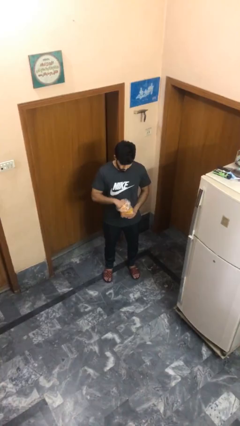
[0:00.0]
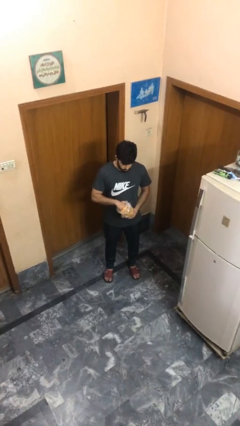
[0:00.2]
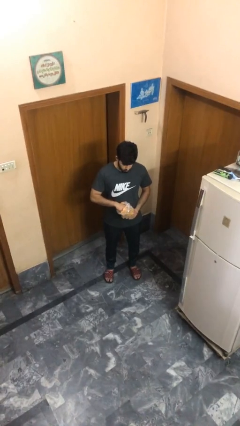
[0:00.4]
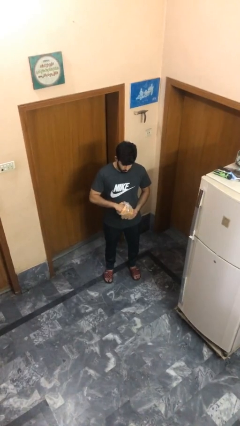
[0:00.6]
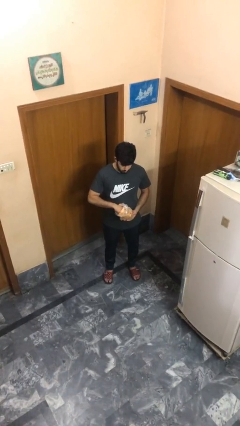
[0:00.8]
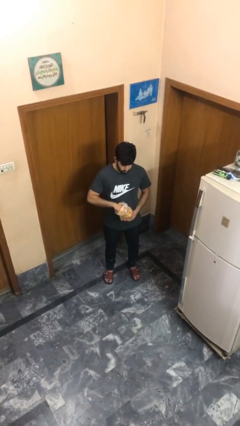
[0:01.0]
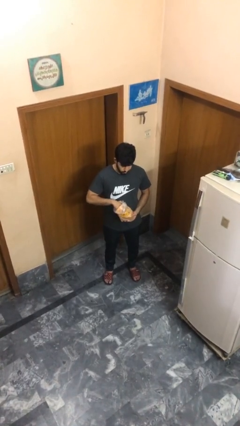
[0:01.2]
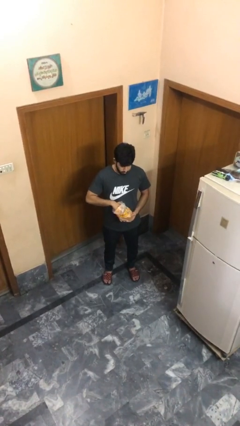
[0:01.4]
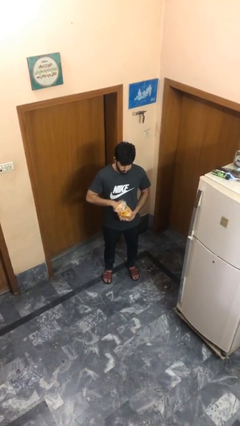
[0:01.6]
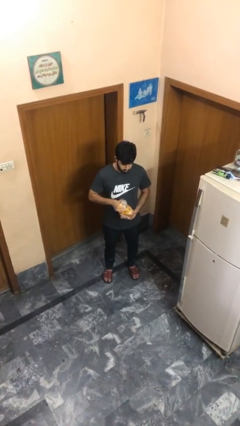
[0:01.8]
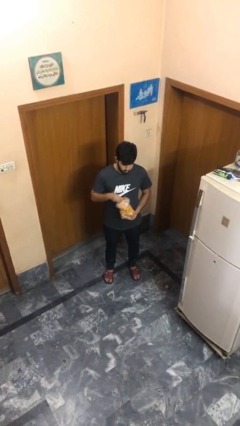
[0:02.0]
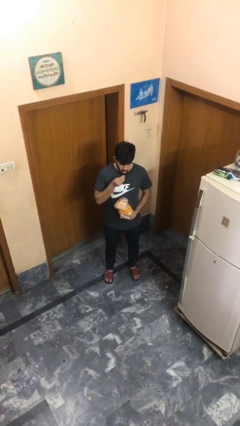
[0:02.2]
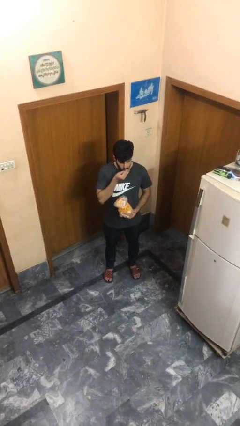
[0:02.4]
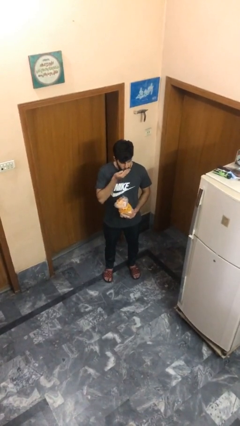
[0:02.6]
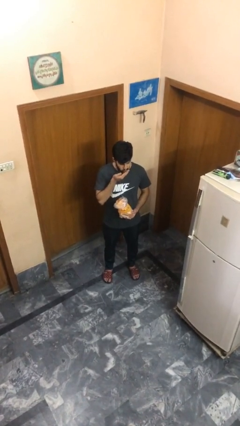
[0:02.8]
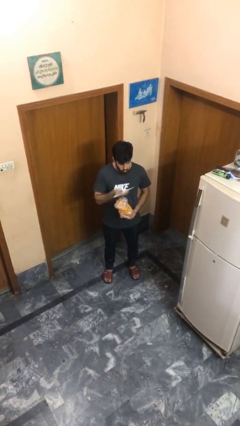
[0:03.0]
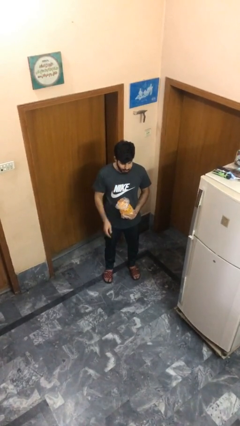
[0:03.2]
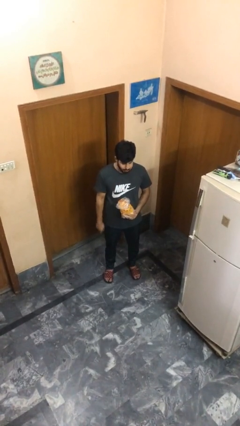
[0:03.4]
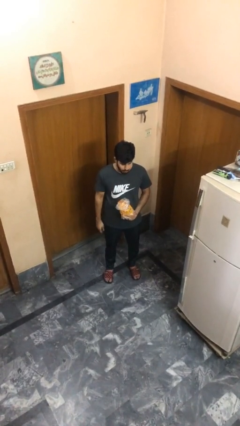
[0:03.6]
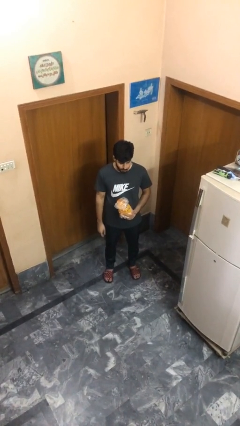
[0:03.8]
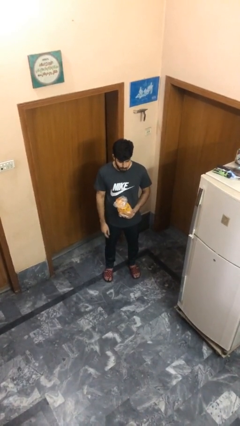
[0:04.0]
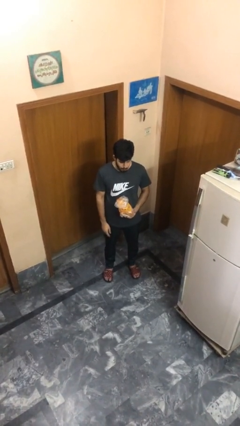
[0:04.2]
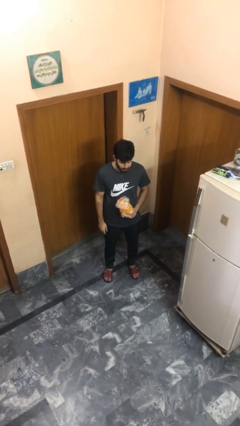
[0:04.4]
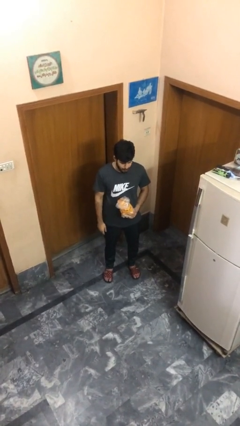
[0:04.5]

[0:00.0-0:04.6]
person eats snack from bag

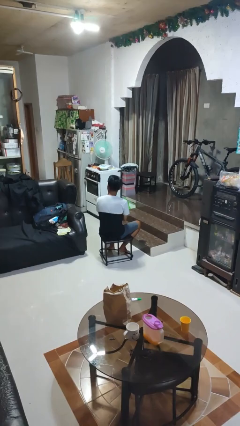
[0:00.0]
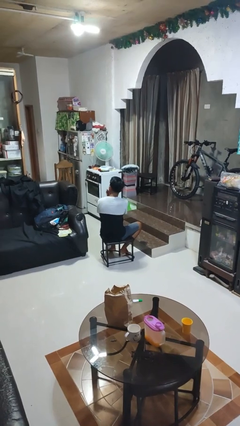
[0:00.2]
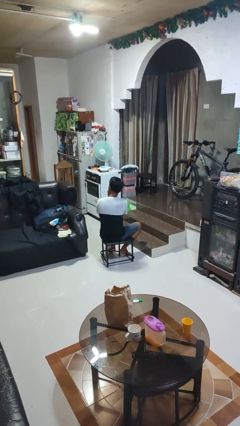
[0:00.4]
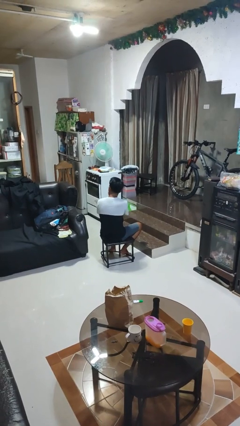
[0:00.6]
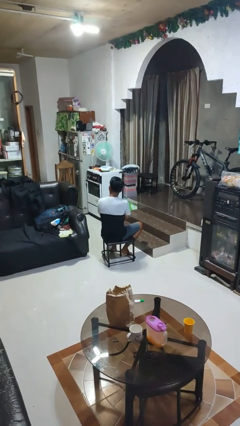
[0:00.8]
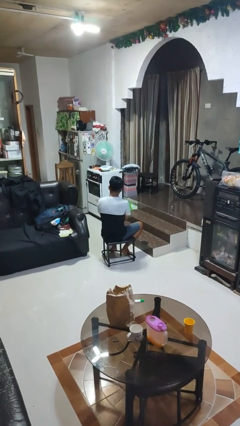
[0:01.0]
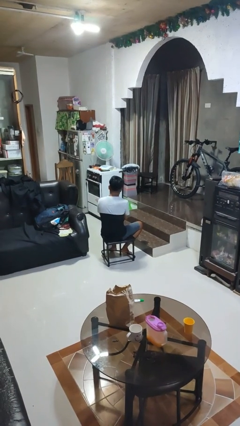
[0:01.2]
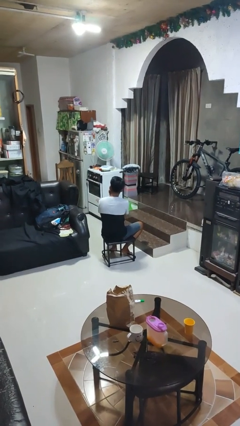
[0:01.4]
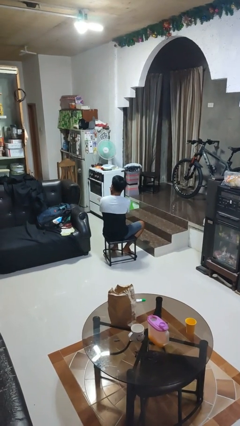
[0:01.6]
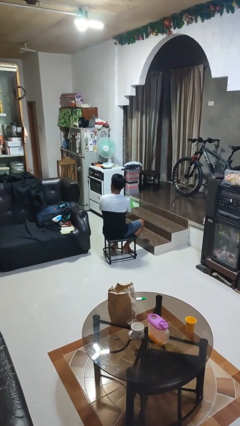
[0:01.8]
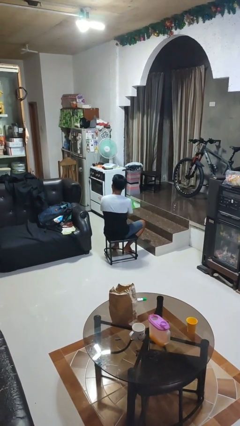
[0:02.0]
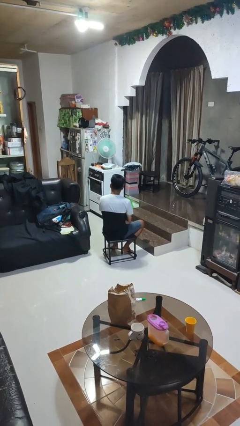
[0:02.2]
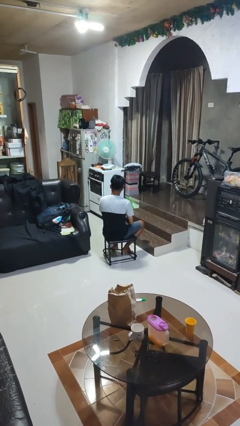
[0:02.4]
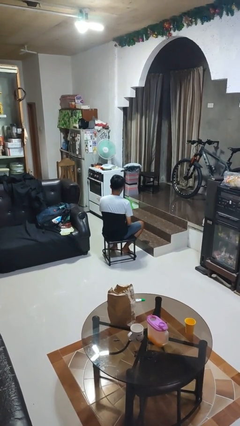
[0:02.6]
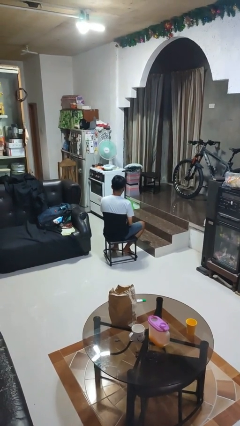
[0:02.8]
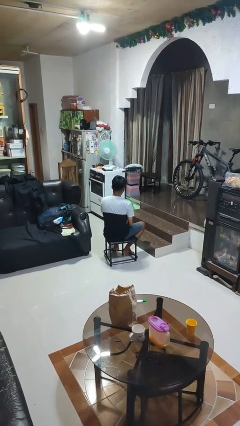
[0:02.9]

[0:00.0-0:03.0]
person strokes chin

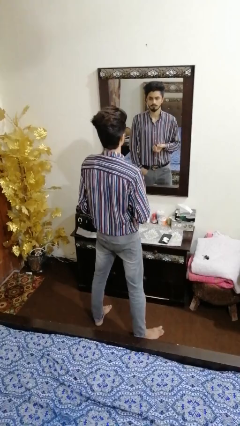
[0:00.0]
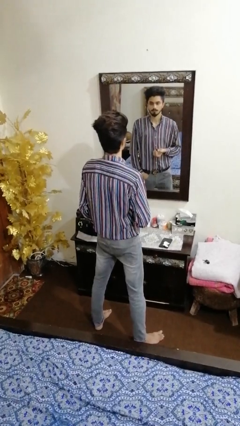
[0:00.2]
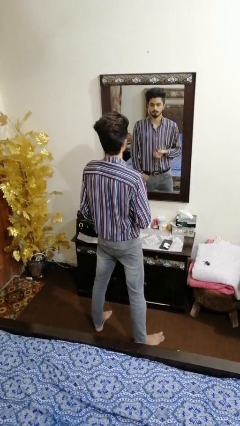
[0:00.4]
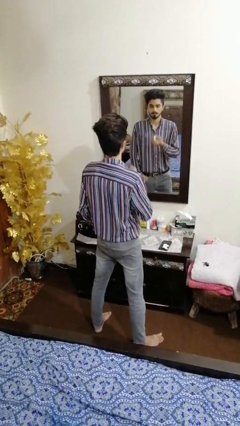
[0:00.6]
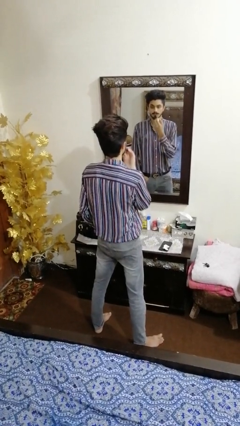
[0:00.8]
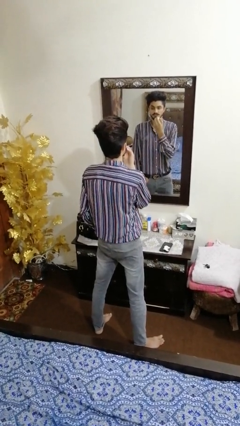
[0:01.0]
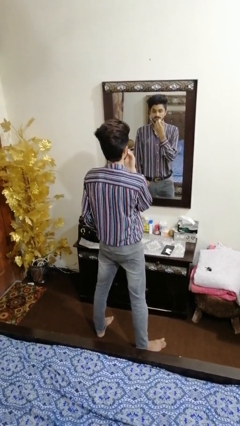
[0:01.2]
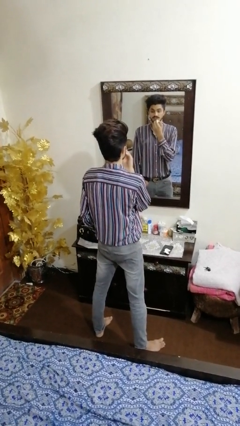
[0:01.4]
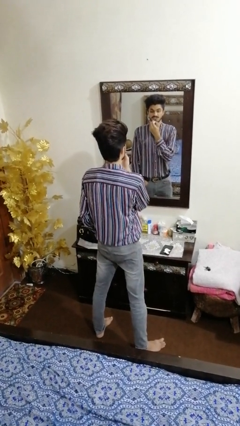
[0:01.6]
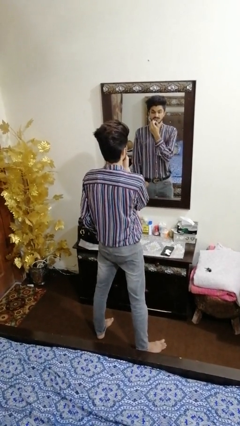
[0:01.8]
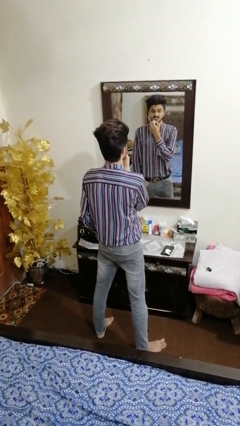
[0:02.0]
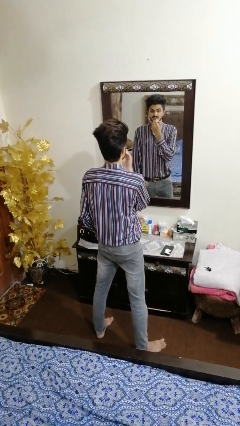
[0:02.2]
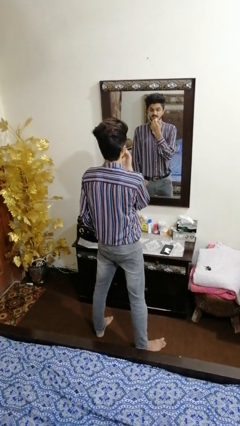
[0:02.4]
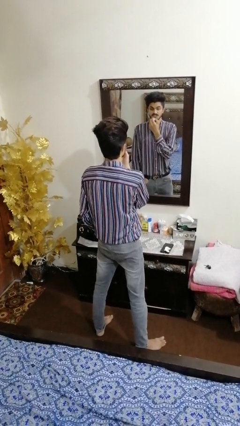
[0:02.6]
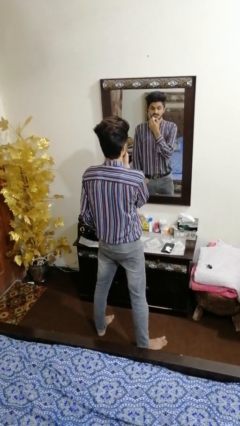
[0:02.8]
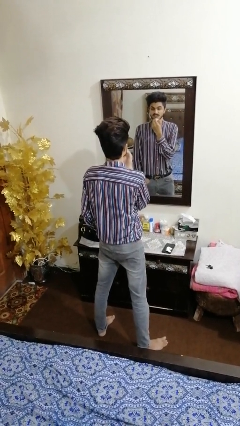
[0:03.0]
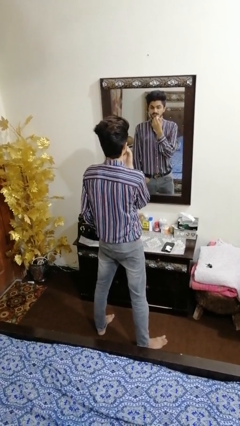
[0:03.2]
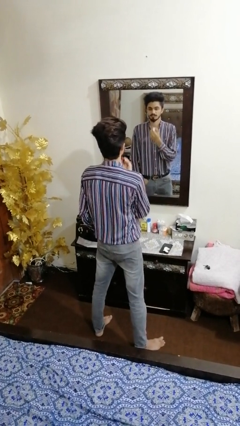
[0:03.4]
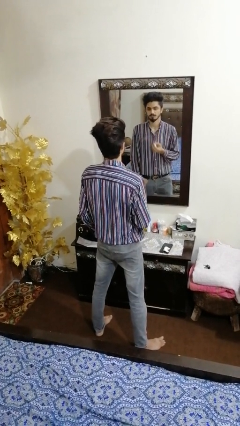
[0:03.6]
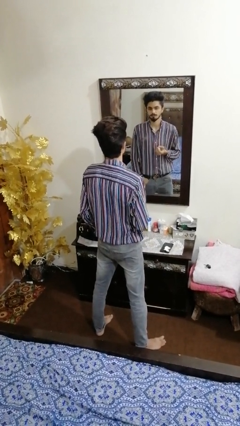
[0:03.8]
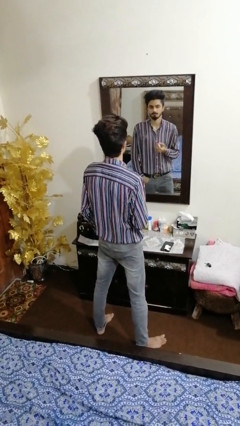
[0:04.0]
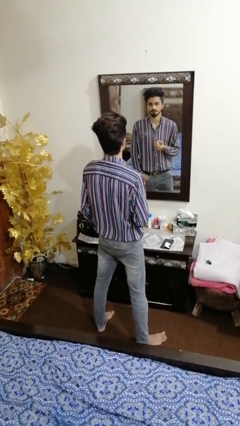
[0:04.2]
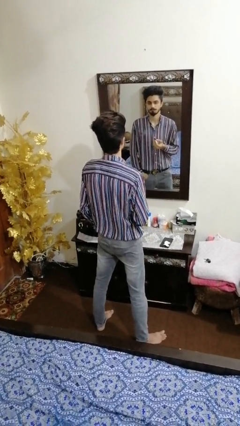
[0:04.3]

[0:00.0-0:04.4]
person applies lip makeup

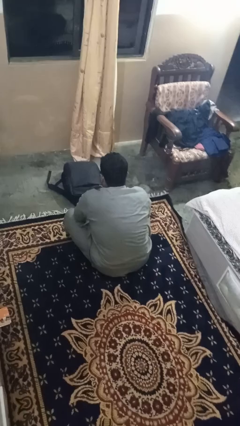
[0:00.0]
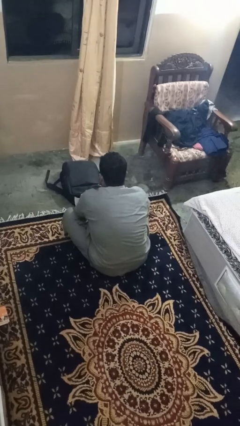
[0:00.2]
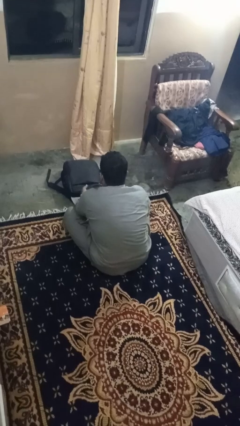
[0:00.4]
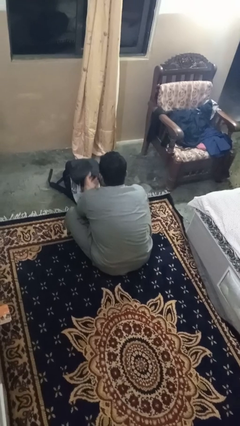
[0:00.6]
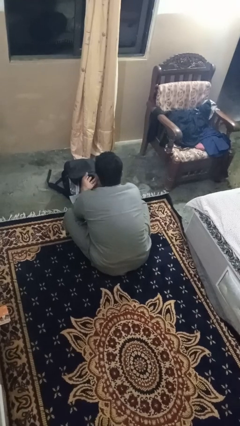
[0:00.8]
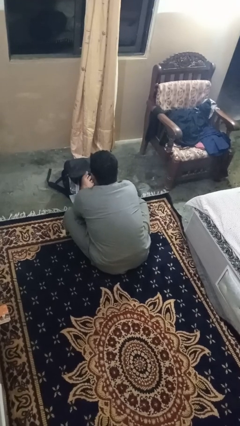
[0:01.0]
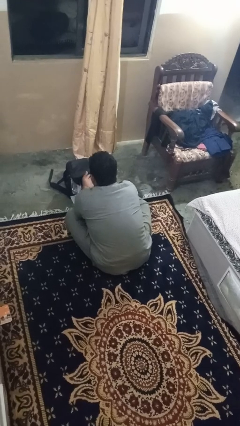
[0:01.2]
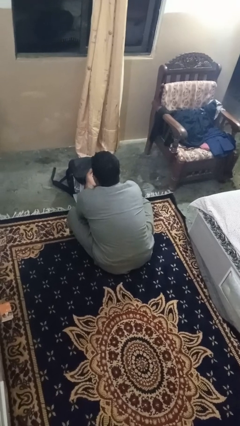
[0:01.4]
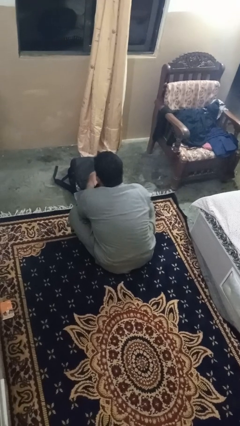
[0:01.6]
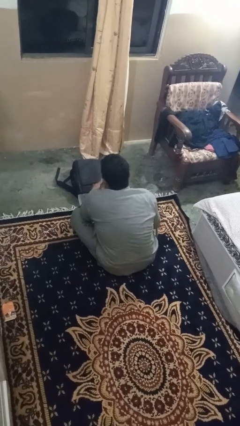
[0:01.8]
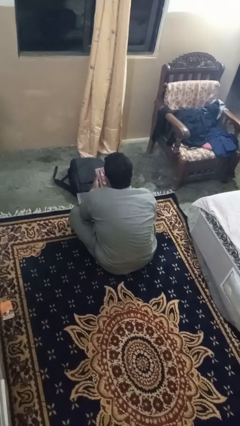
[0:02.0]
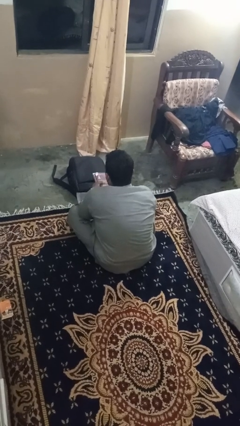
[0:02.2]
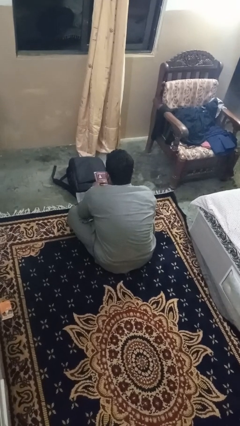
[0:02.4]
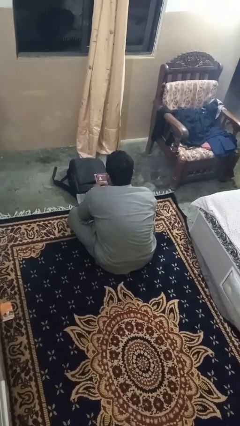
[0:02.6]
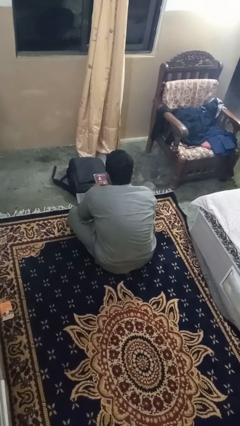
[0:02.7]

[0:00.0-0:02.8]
person takes object from bag

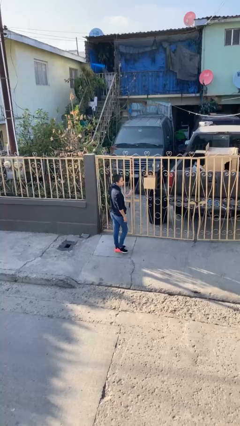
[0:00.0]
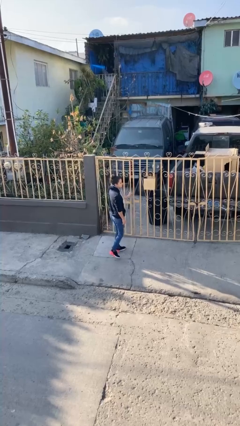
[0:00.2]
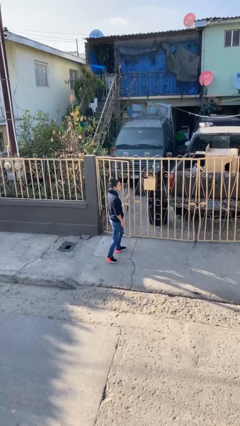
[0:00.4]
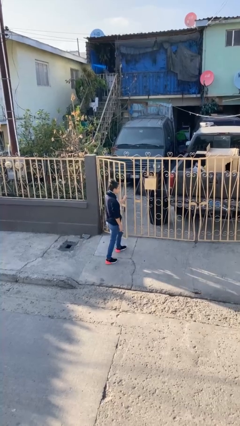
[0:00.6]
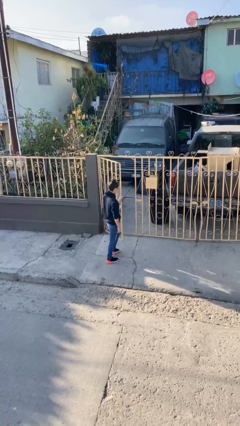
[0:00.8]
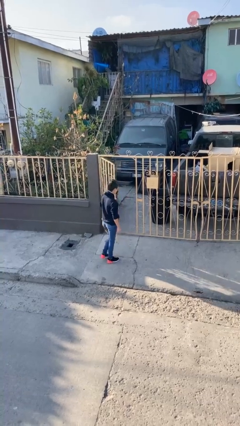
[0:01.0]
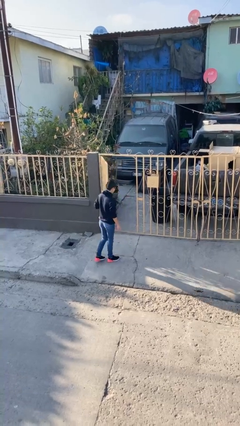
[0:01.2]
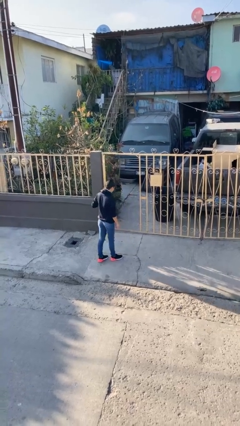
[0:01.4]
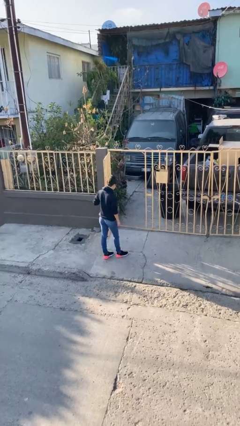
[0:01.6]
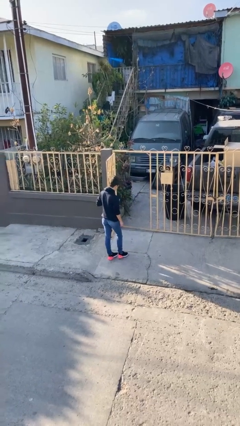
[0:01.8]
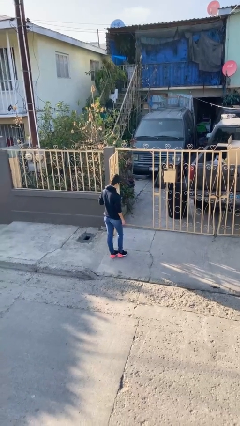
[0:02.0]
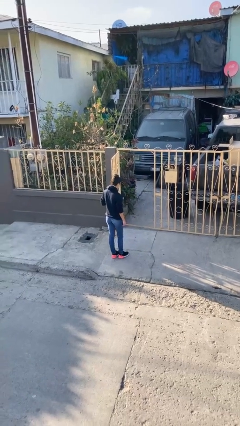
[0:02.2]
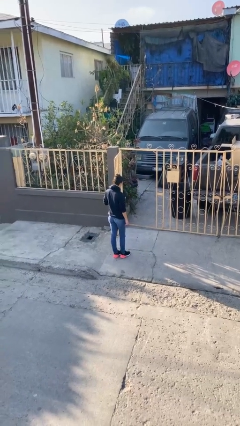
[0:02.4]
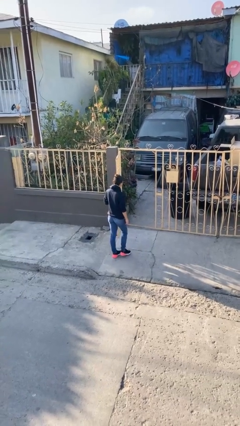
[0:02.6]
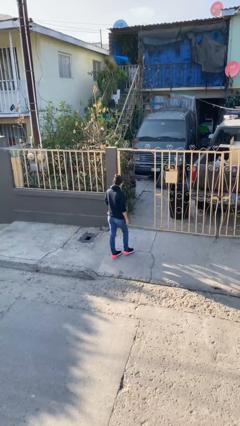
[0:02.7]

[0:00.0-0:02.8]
person opens facility door
